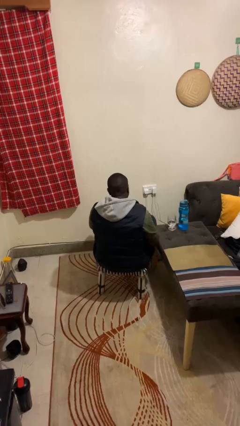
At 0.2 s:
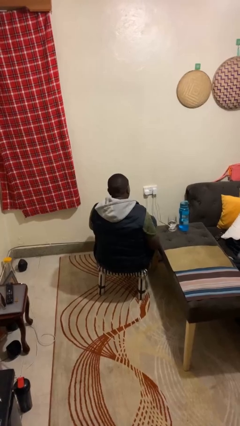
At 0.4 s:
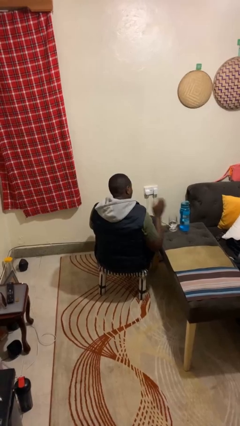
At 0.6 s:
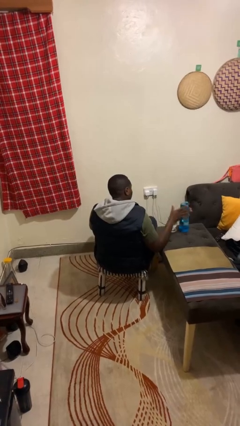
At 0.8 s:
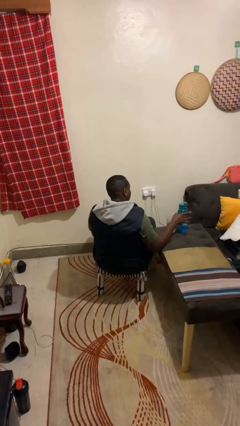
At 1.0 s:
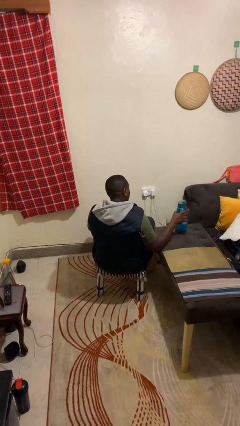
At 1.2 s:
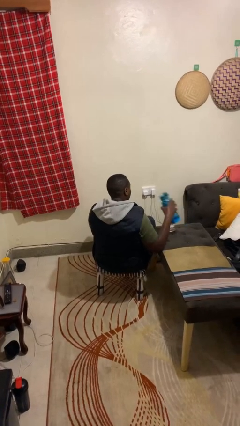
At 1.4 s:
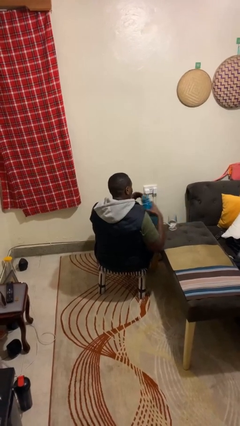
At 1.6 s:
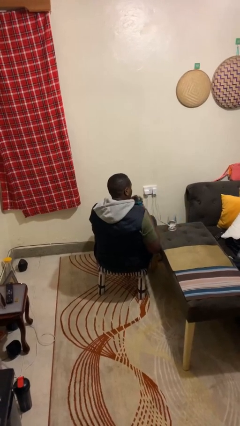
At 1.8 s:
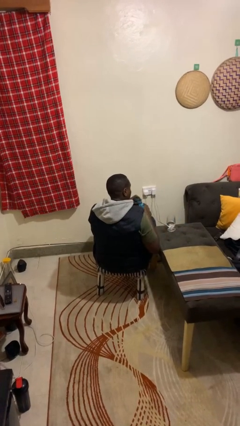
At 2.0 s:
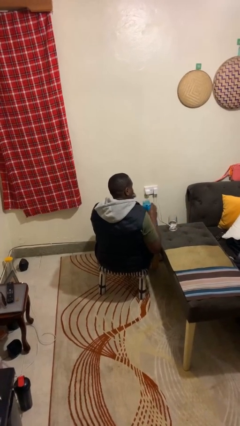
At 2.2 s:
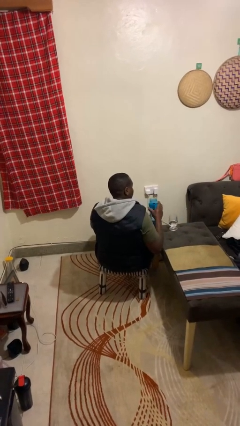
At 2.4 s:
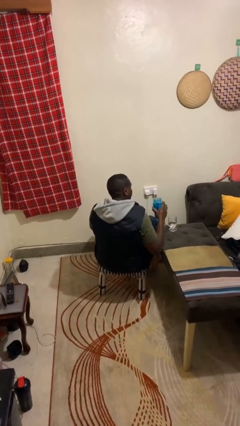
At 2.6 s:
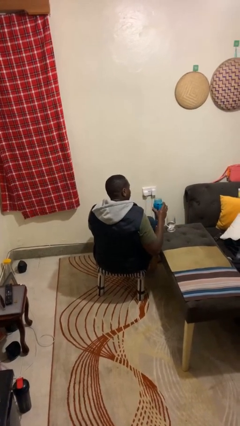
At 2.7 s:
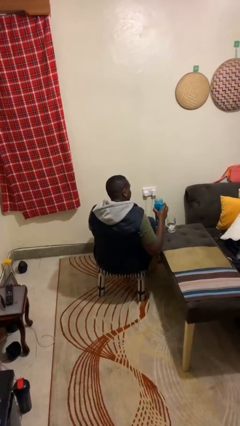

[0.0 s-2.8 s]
person unscrews lid from bottle

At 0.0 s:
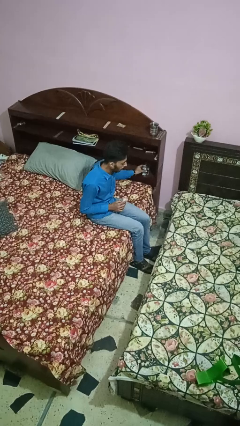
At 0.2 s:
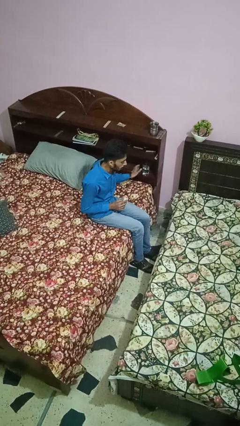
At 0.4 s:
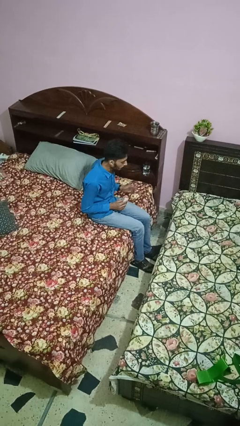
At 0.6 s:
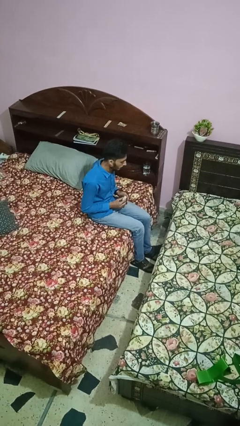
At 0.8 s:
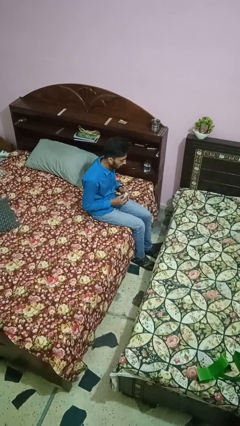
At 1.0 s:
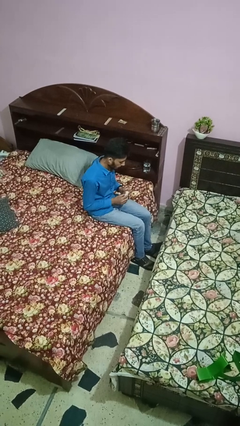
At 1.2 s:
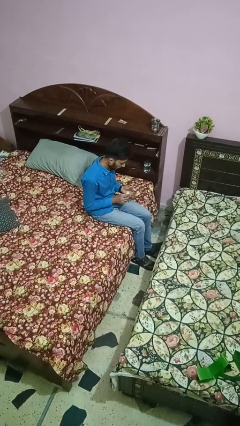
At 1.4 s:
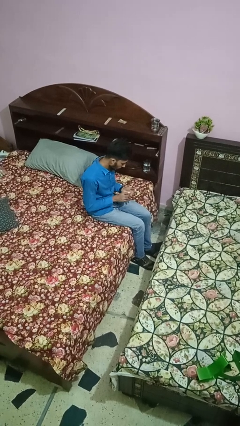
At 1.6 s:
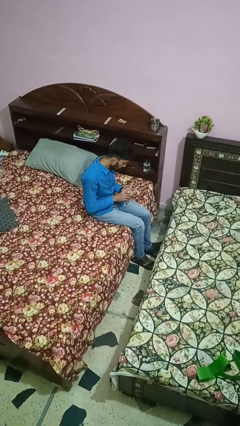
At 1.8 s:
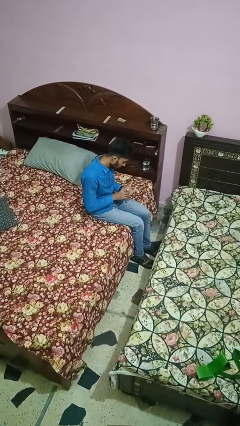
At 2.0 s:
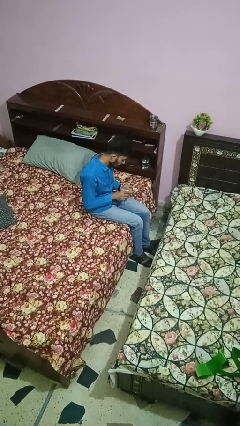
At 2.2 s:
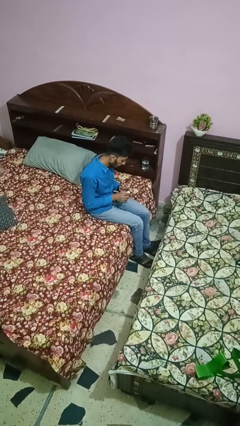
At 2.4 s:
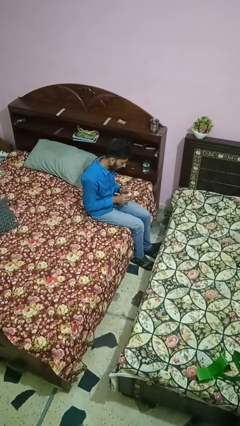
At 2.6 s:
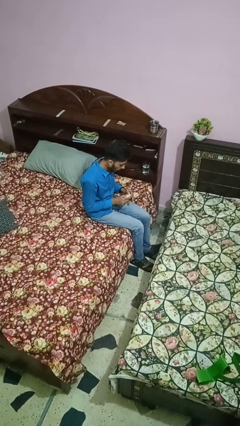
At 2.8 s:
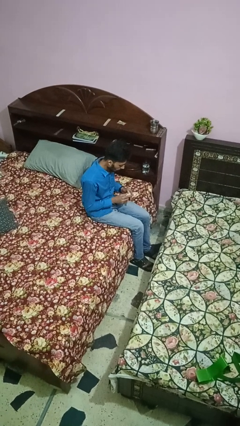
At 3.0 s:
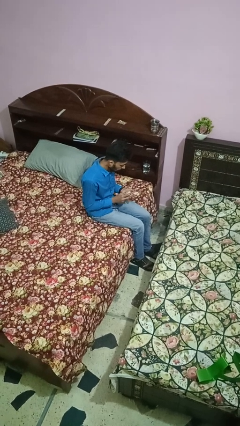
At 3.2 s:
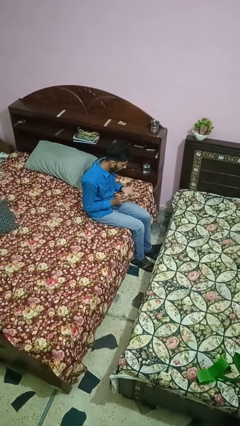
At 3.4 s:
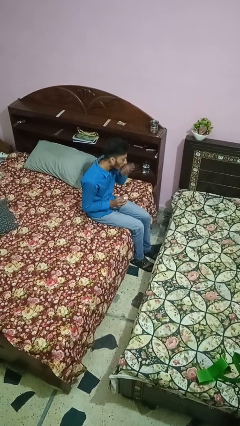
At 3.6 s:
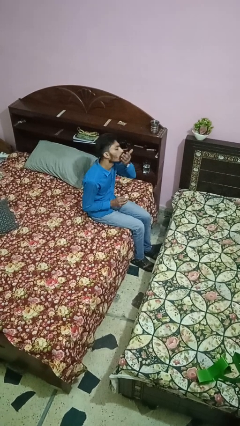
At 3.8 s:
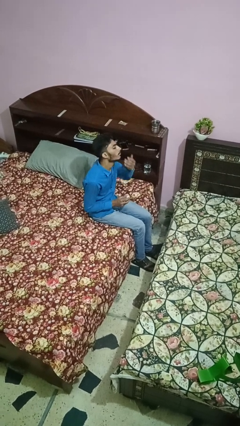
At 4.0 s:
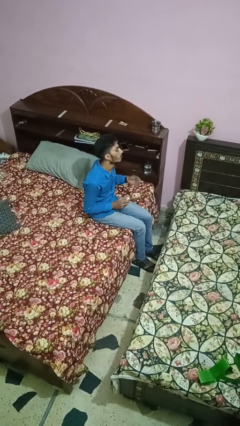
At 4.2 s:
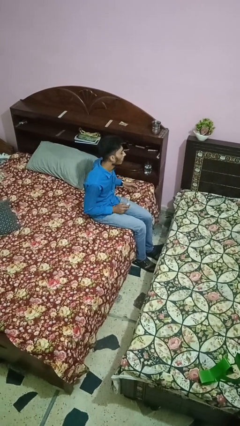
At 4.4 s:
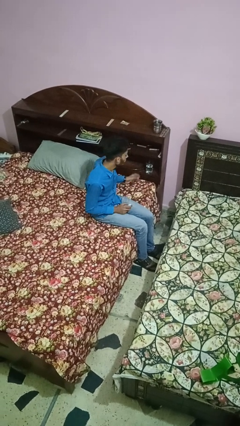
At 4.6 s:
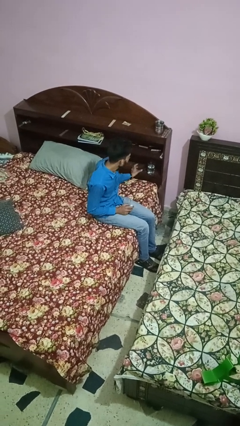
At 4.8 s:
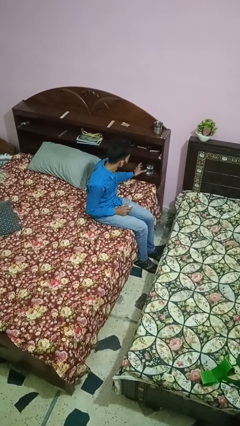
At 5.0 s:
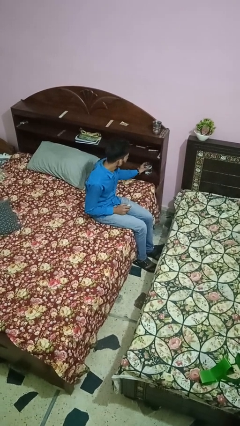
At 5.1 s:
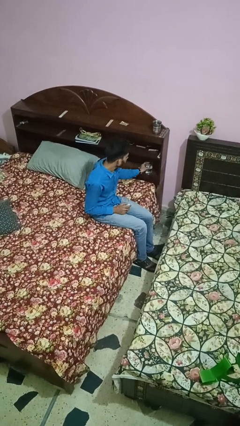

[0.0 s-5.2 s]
person takes medicine pills

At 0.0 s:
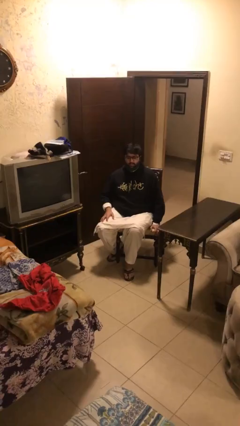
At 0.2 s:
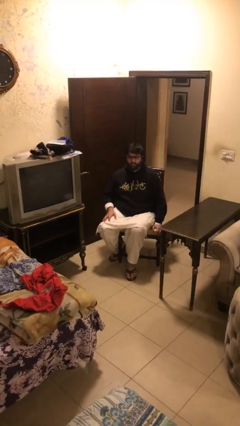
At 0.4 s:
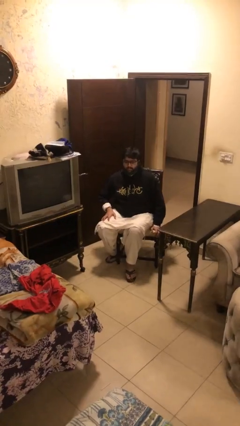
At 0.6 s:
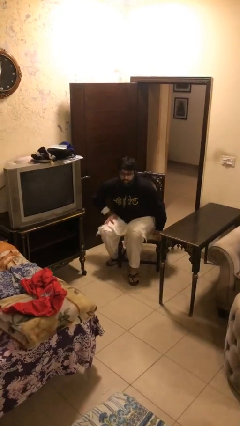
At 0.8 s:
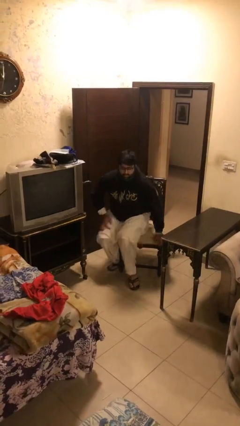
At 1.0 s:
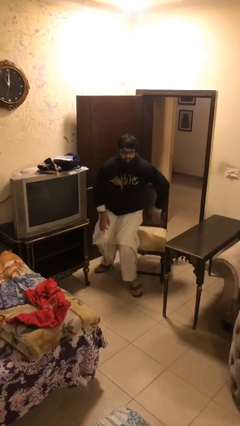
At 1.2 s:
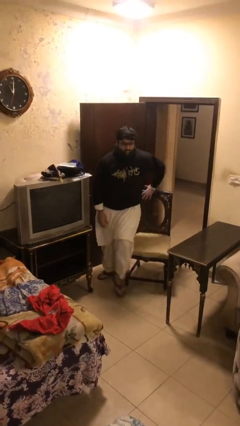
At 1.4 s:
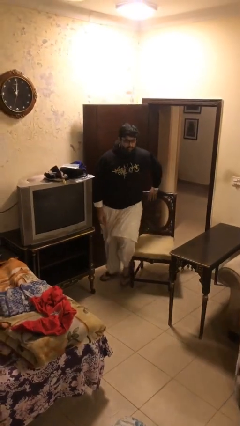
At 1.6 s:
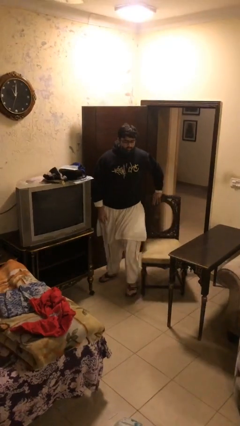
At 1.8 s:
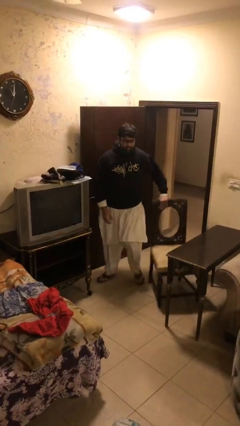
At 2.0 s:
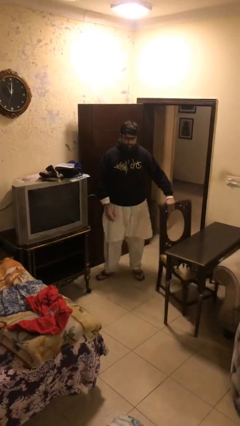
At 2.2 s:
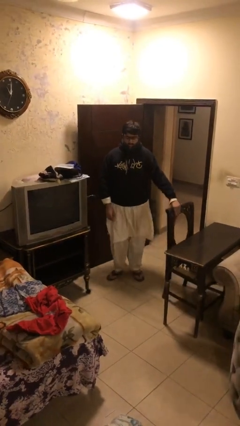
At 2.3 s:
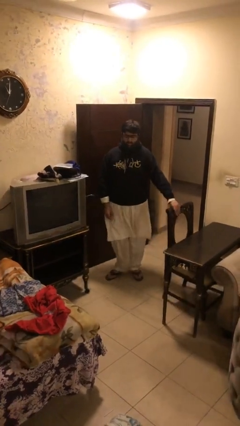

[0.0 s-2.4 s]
person stands up

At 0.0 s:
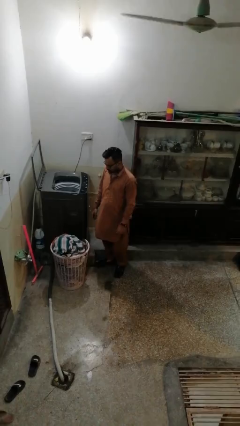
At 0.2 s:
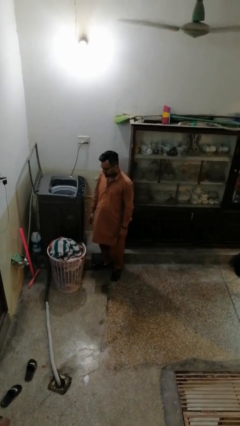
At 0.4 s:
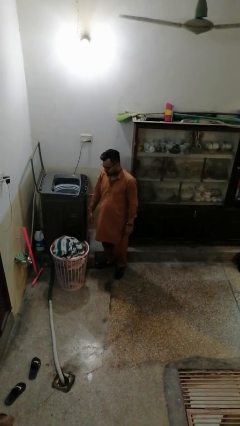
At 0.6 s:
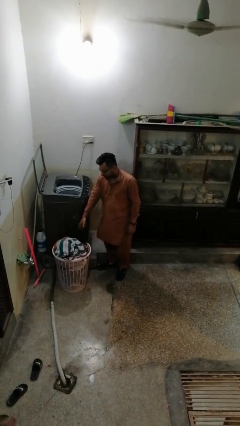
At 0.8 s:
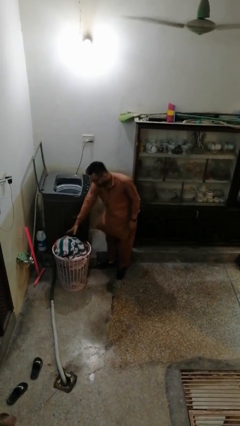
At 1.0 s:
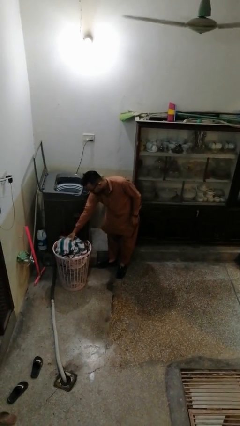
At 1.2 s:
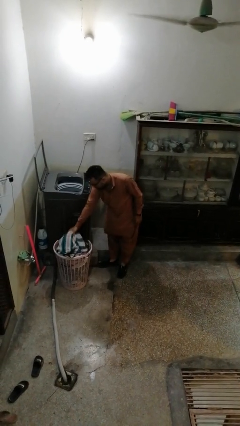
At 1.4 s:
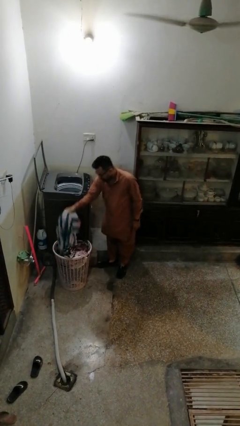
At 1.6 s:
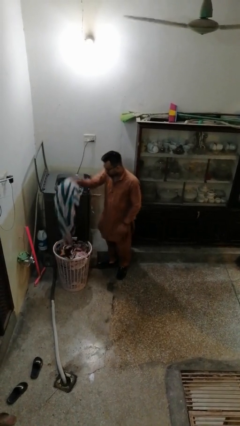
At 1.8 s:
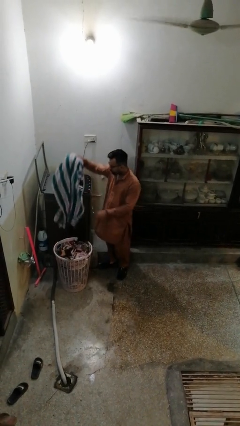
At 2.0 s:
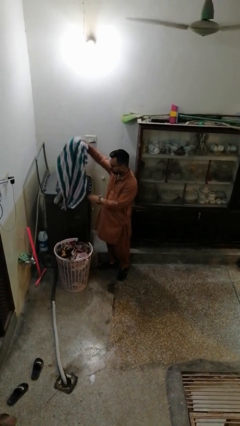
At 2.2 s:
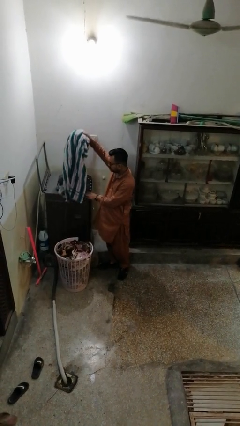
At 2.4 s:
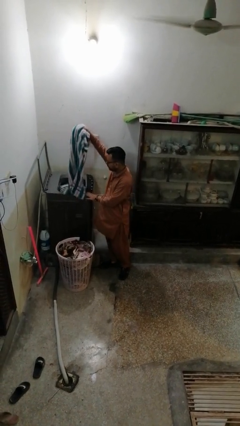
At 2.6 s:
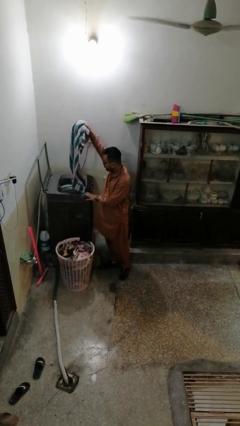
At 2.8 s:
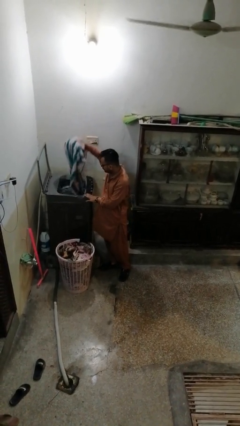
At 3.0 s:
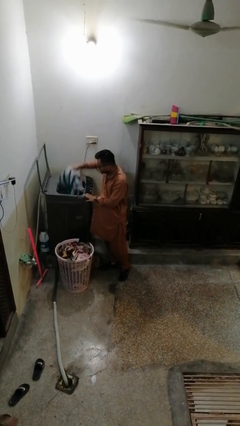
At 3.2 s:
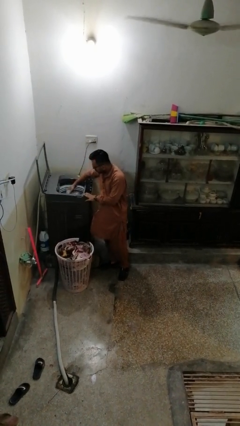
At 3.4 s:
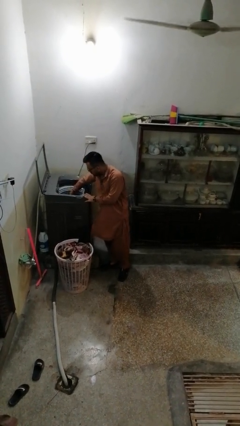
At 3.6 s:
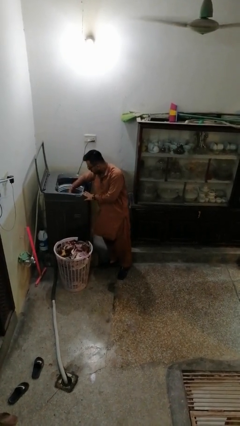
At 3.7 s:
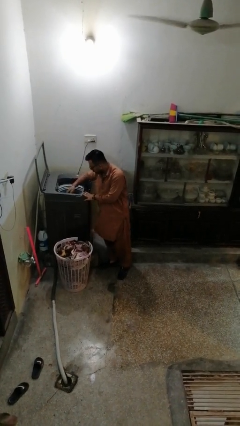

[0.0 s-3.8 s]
person loads clotheswasher

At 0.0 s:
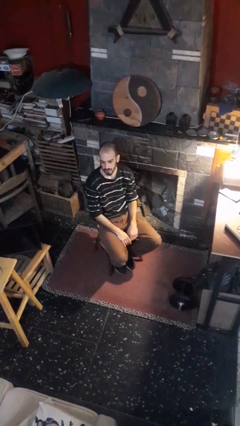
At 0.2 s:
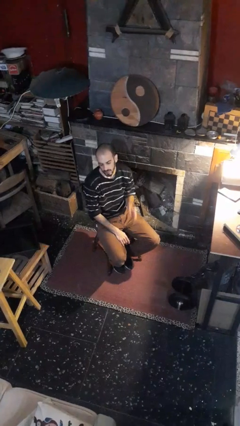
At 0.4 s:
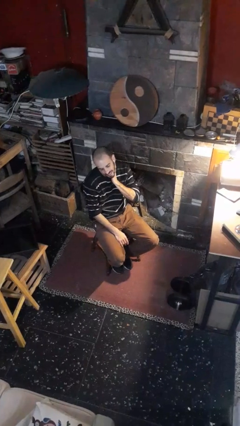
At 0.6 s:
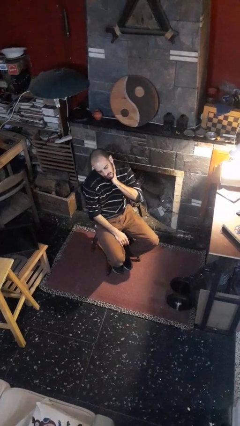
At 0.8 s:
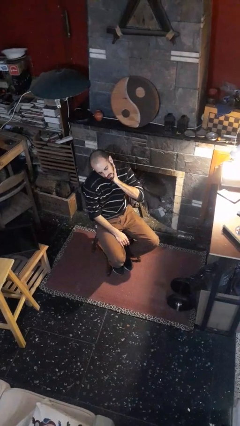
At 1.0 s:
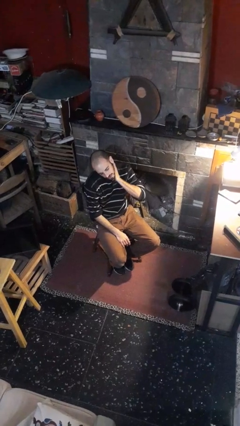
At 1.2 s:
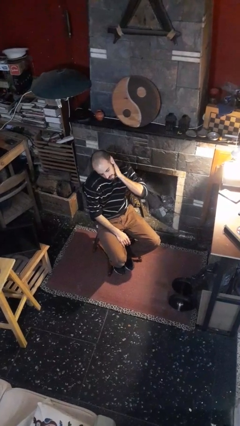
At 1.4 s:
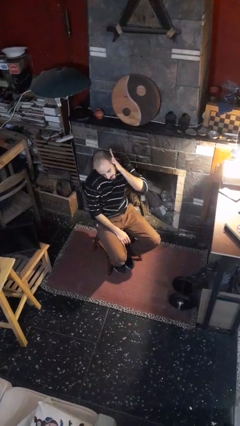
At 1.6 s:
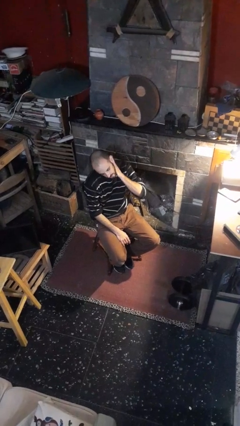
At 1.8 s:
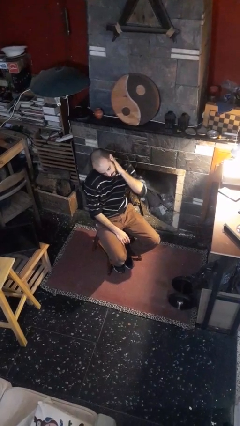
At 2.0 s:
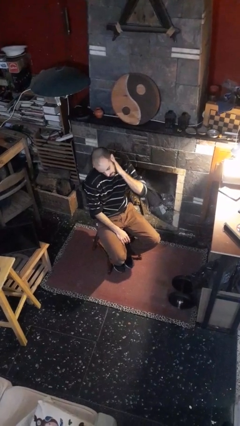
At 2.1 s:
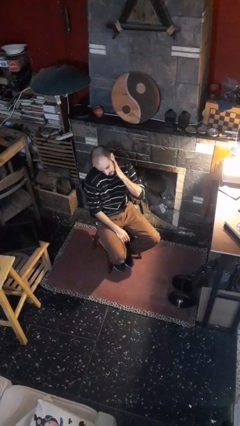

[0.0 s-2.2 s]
person swats bug

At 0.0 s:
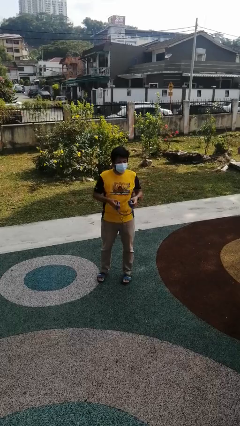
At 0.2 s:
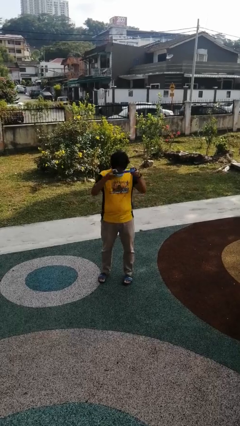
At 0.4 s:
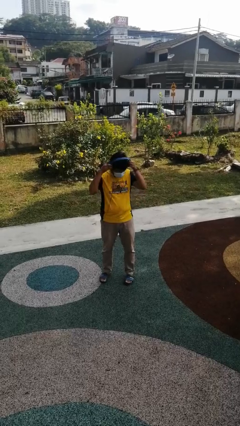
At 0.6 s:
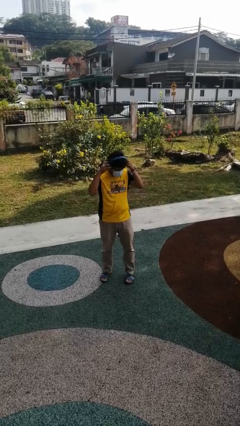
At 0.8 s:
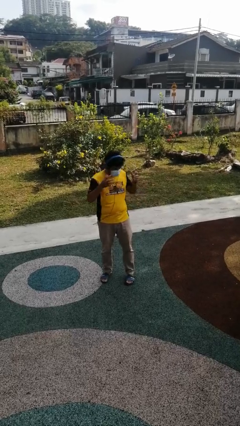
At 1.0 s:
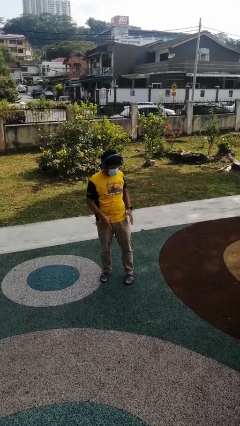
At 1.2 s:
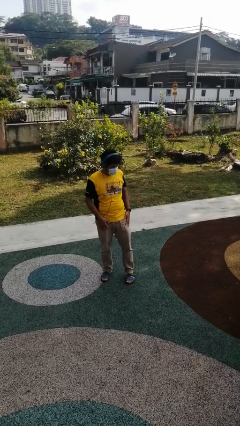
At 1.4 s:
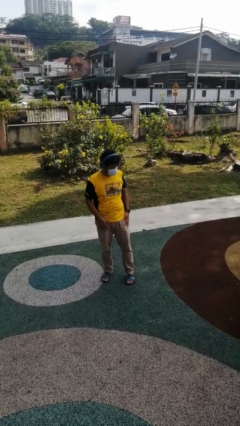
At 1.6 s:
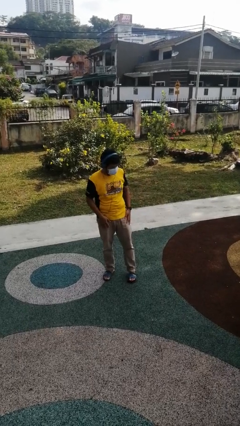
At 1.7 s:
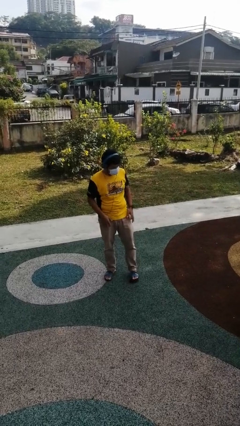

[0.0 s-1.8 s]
person puts on headphones
